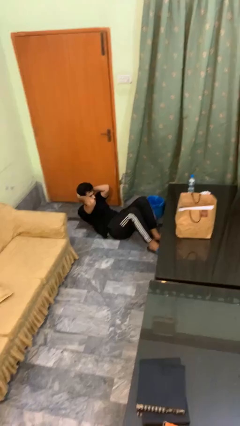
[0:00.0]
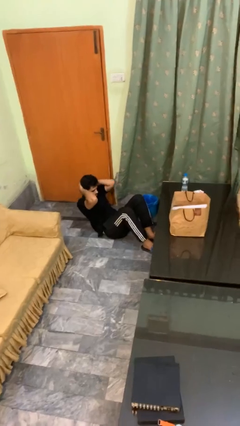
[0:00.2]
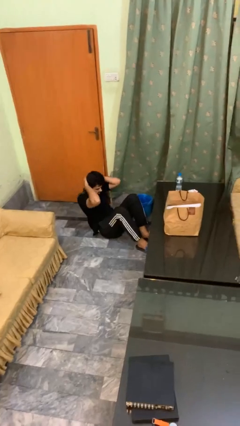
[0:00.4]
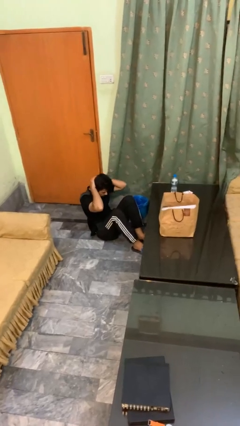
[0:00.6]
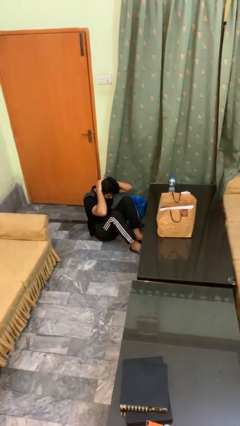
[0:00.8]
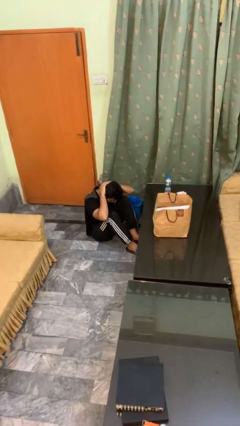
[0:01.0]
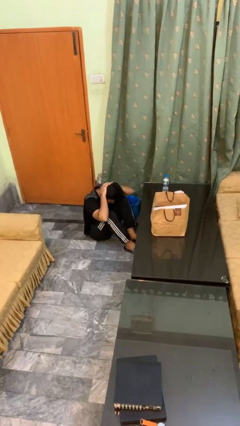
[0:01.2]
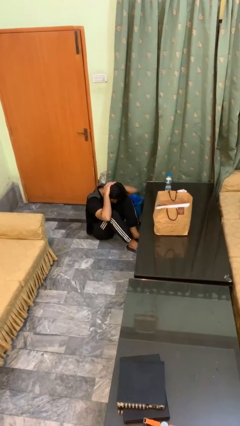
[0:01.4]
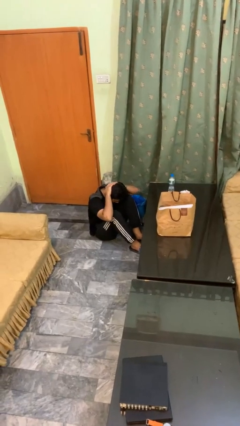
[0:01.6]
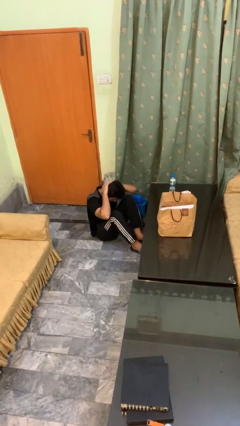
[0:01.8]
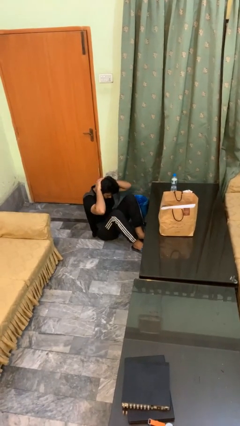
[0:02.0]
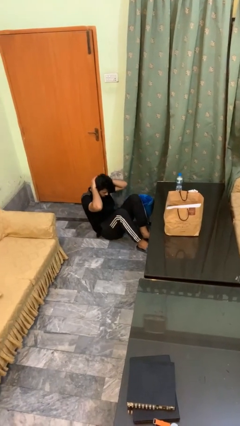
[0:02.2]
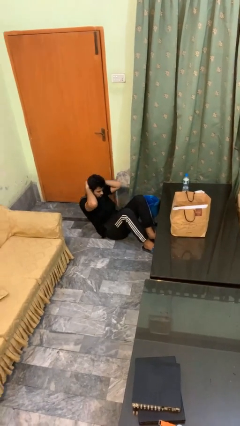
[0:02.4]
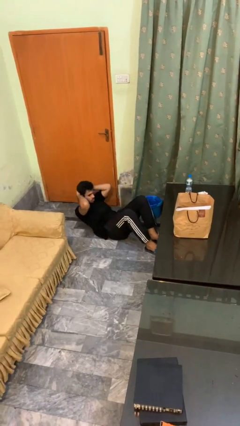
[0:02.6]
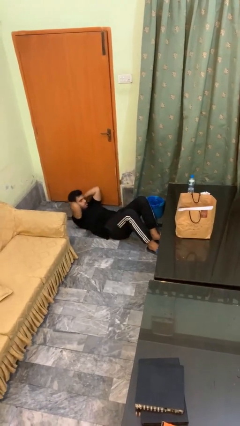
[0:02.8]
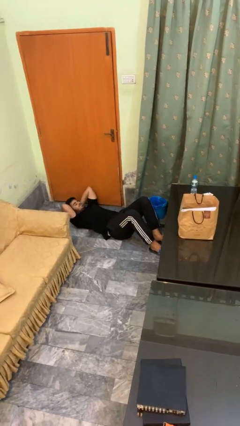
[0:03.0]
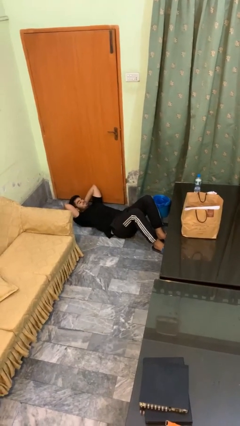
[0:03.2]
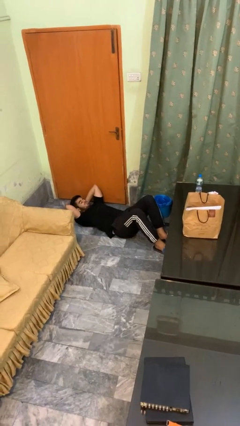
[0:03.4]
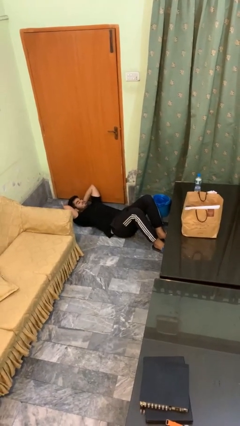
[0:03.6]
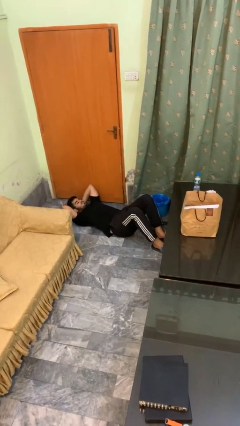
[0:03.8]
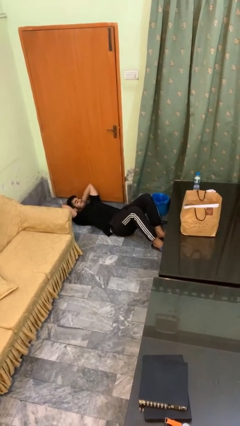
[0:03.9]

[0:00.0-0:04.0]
person exercises with situp

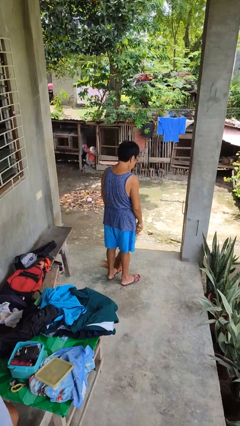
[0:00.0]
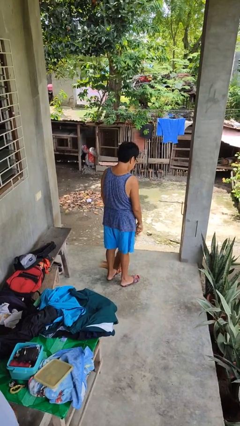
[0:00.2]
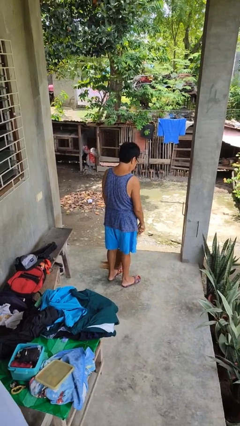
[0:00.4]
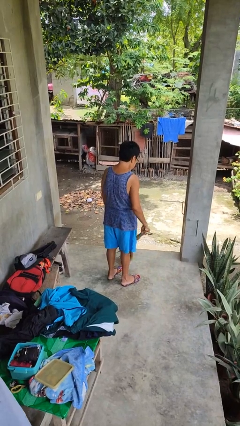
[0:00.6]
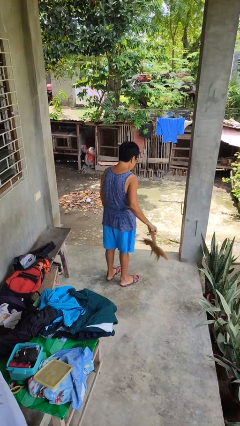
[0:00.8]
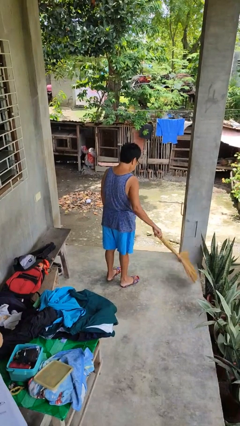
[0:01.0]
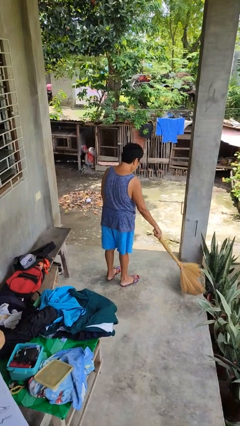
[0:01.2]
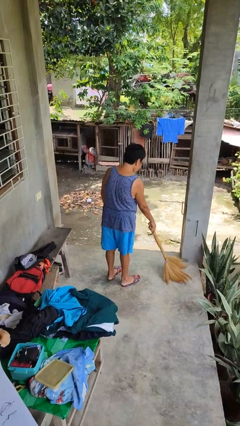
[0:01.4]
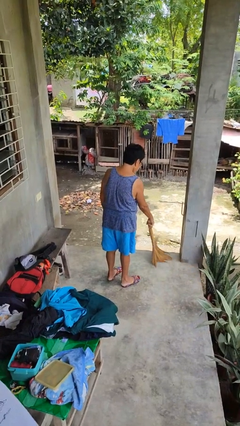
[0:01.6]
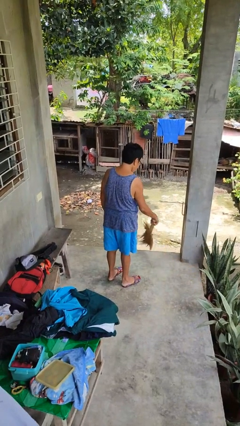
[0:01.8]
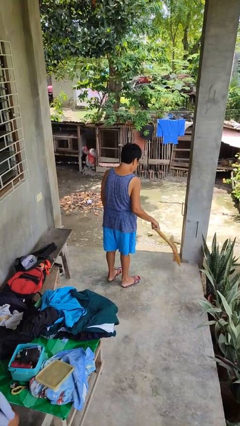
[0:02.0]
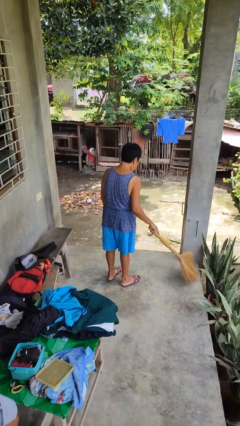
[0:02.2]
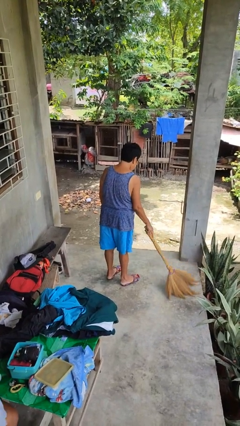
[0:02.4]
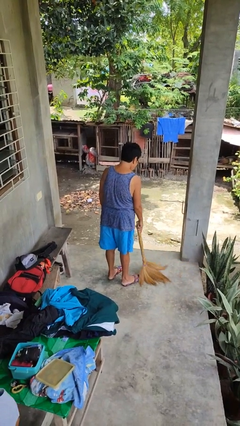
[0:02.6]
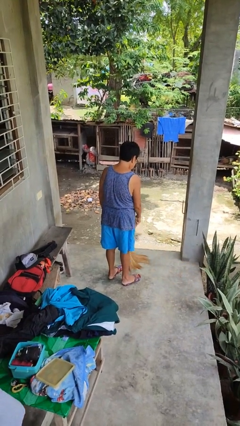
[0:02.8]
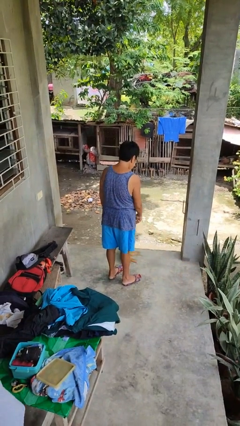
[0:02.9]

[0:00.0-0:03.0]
person sweeps floor

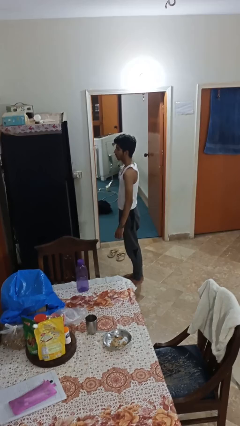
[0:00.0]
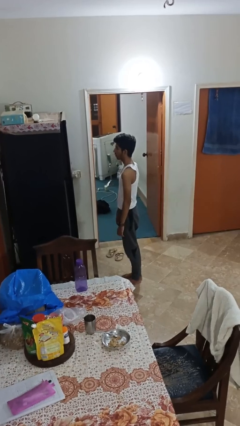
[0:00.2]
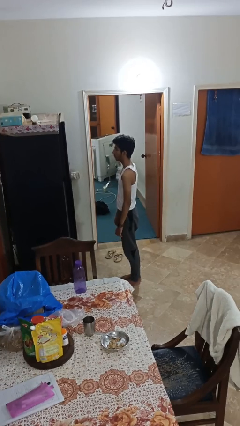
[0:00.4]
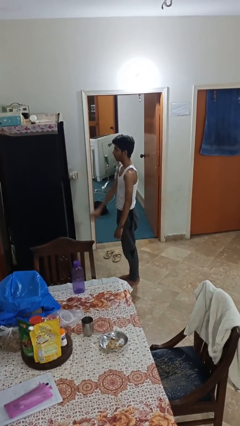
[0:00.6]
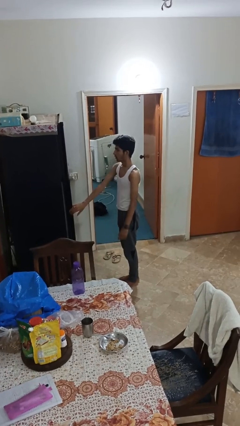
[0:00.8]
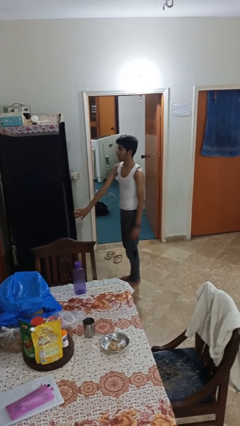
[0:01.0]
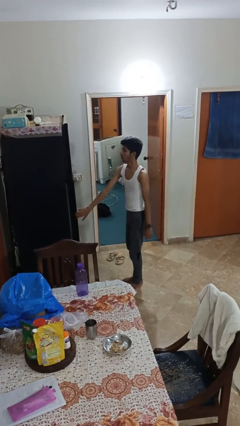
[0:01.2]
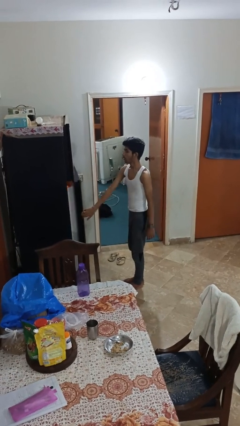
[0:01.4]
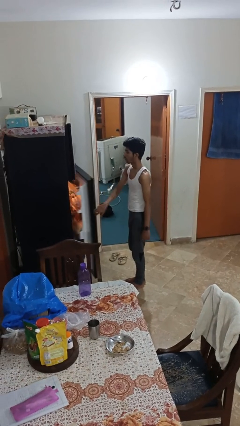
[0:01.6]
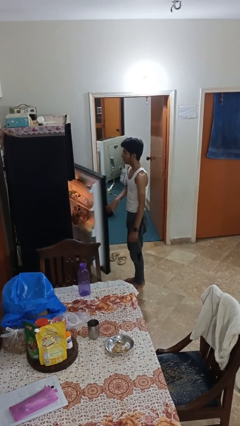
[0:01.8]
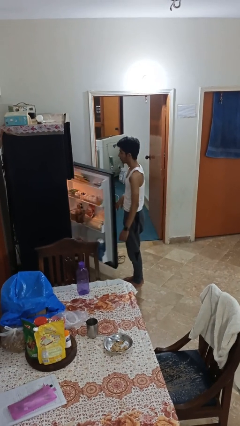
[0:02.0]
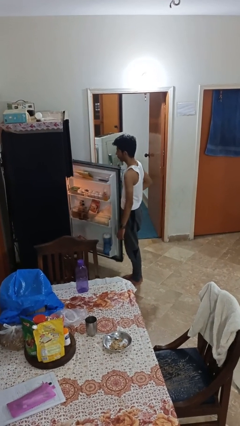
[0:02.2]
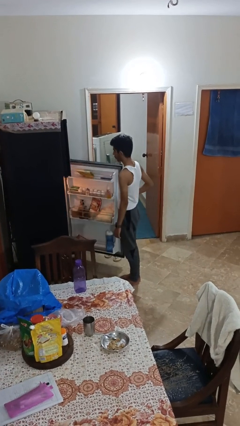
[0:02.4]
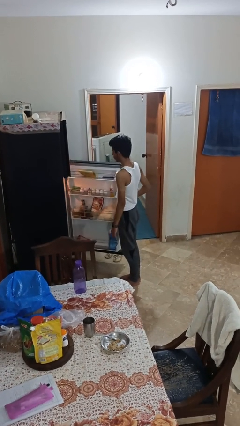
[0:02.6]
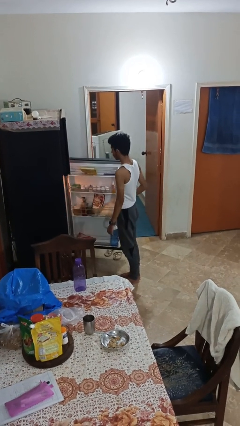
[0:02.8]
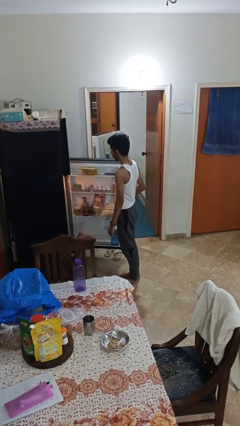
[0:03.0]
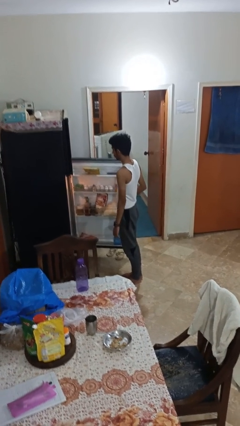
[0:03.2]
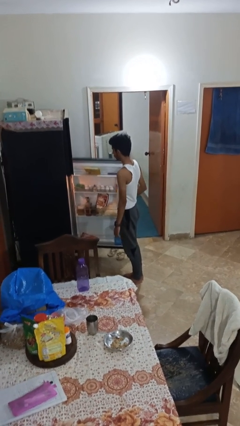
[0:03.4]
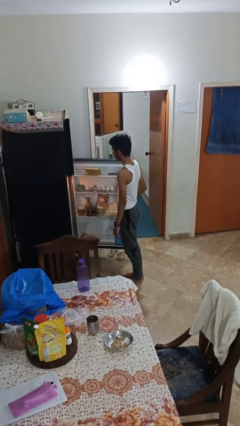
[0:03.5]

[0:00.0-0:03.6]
person opens refrigerator

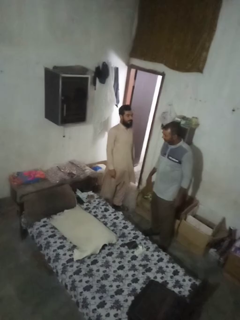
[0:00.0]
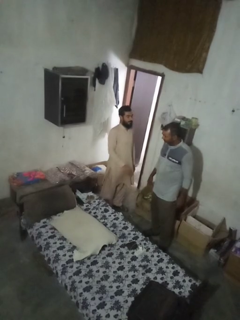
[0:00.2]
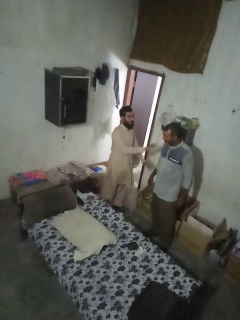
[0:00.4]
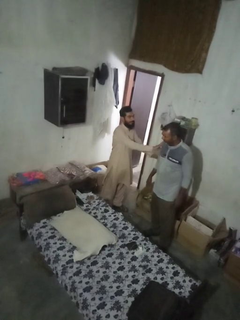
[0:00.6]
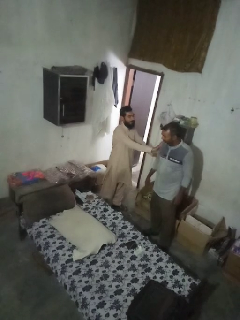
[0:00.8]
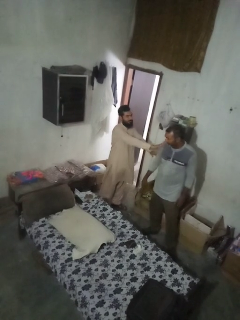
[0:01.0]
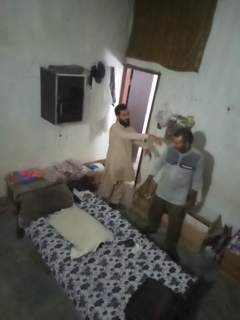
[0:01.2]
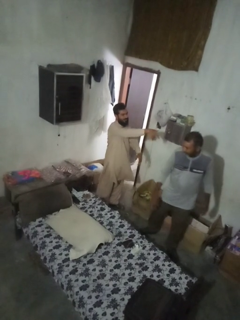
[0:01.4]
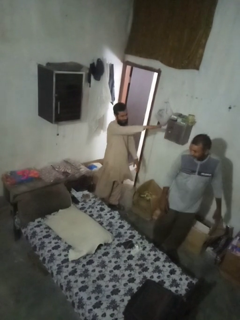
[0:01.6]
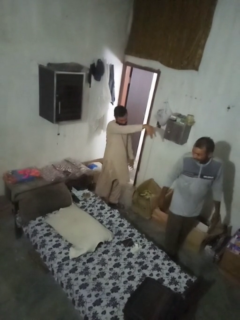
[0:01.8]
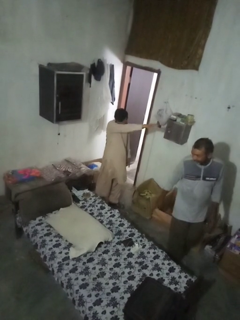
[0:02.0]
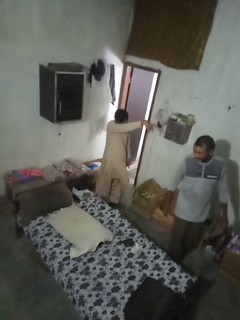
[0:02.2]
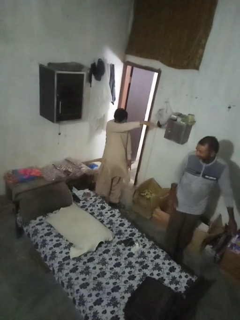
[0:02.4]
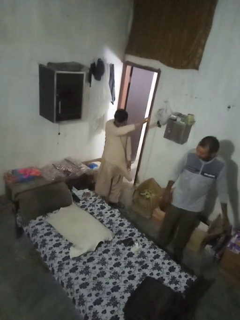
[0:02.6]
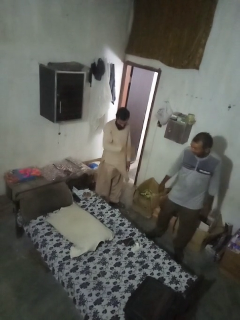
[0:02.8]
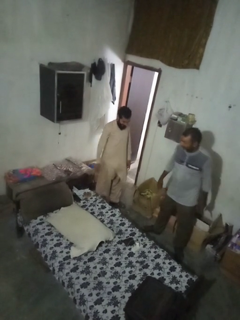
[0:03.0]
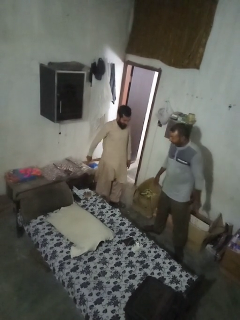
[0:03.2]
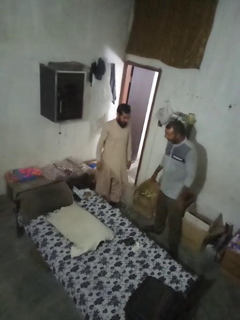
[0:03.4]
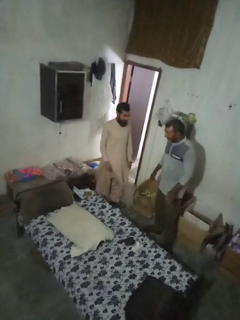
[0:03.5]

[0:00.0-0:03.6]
person shoves person

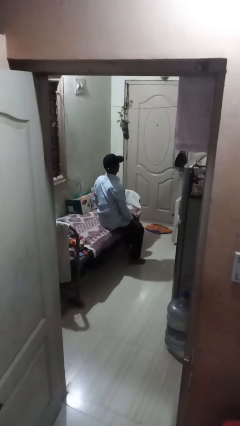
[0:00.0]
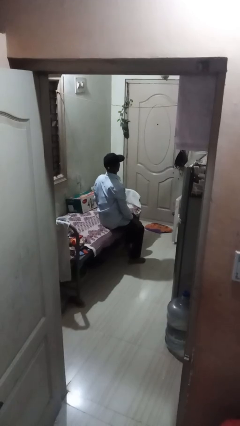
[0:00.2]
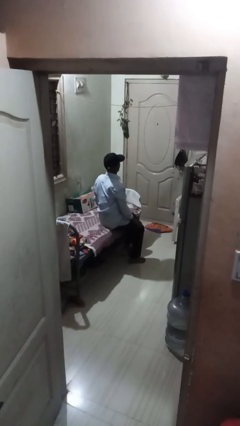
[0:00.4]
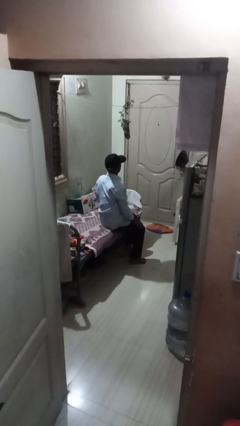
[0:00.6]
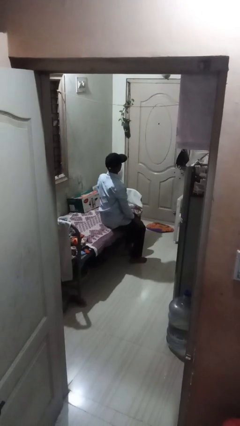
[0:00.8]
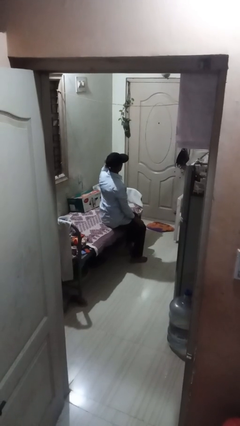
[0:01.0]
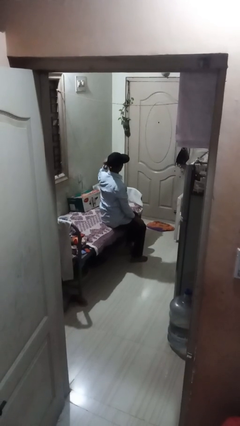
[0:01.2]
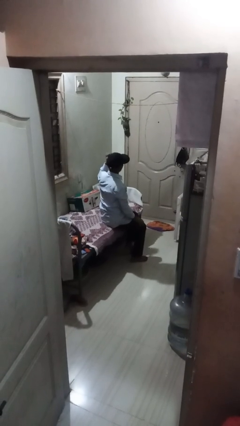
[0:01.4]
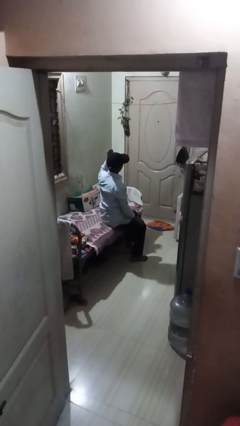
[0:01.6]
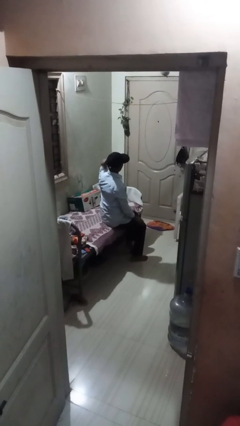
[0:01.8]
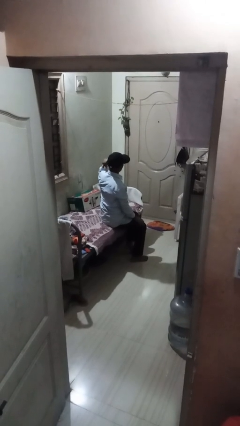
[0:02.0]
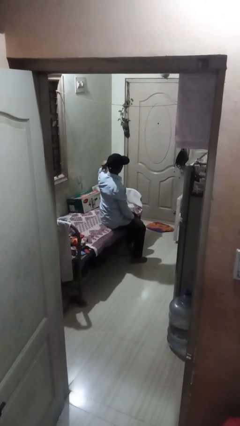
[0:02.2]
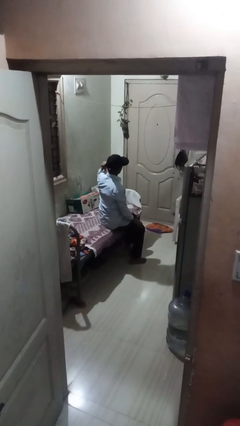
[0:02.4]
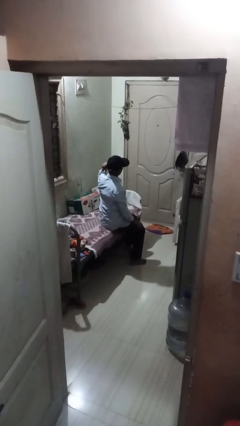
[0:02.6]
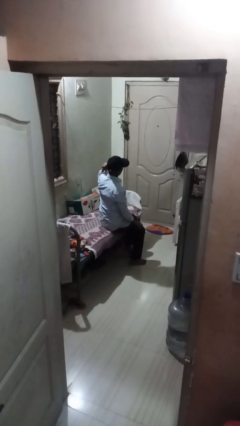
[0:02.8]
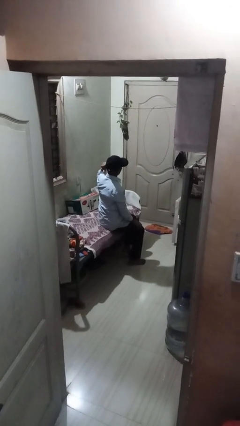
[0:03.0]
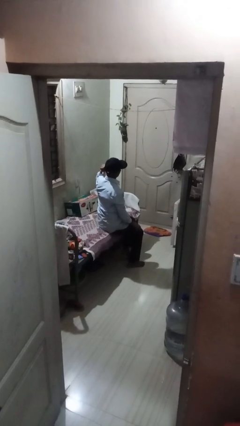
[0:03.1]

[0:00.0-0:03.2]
person gestures behind me

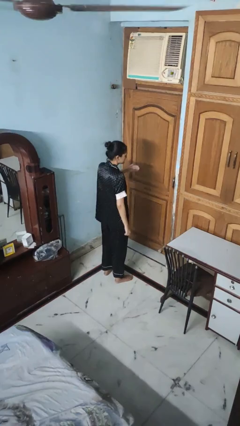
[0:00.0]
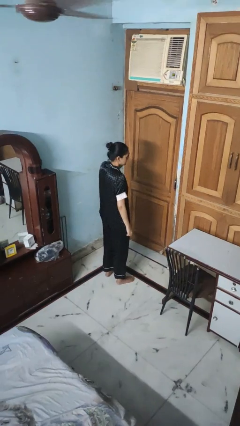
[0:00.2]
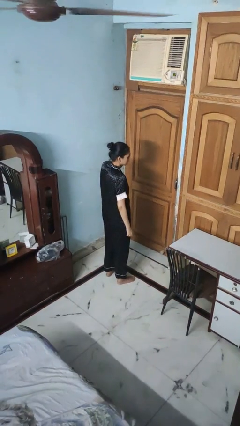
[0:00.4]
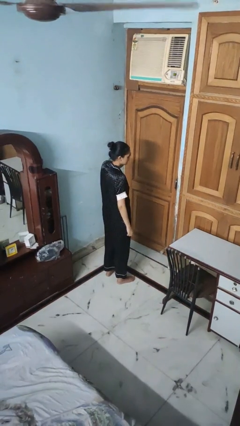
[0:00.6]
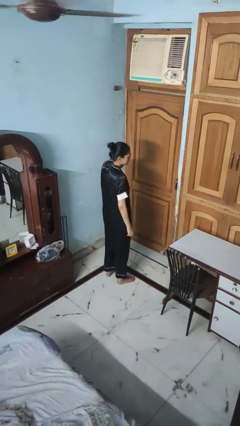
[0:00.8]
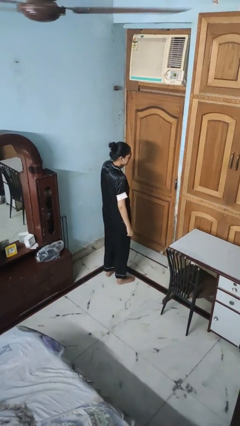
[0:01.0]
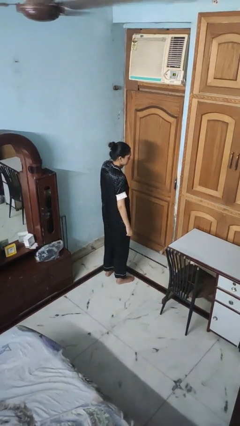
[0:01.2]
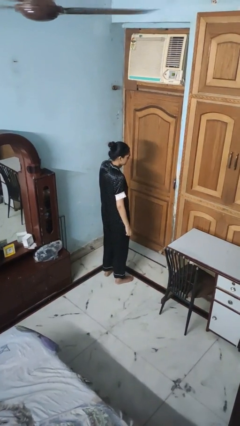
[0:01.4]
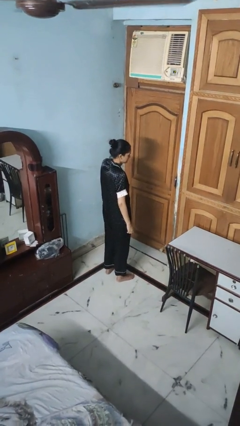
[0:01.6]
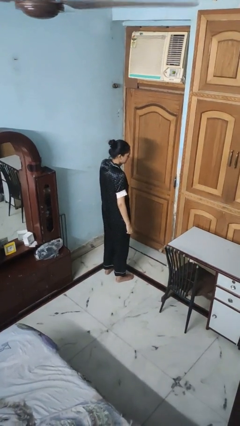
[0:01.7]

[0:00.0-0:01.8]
person rubs eyes
